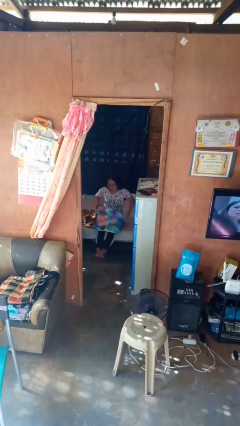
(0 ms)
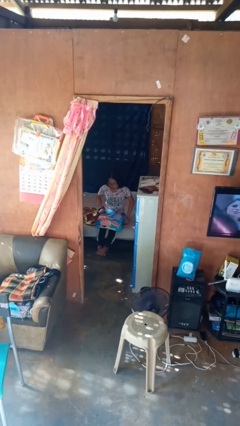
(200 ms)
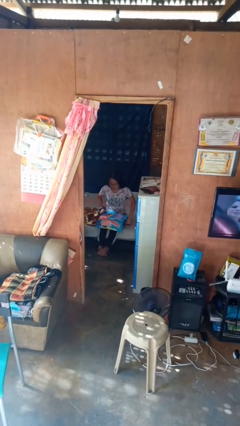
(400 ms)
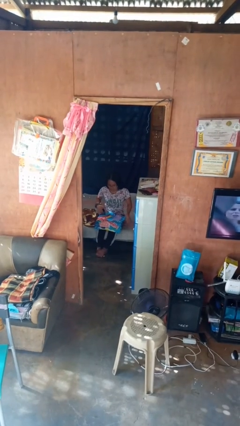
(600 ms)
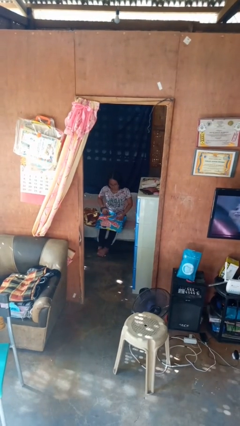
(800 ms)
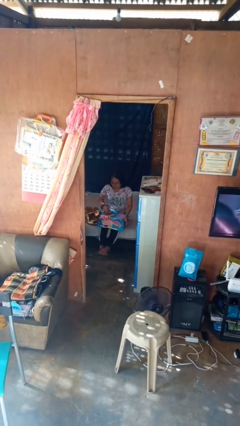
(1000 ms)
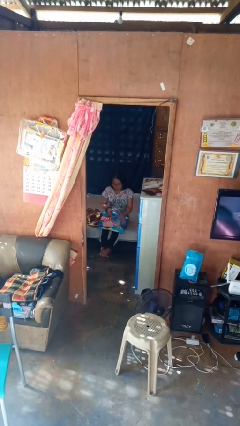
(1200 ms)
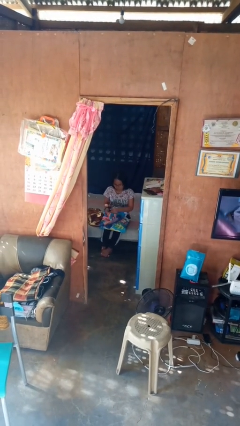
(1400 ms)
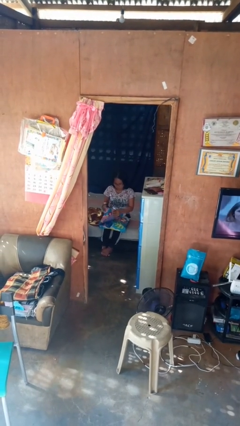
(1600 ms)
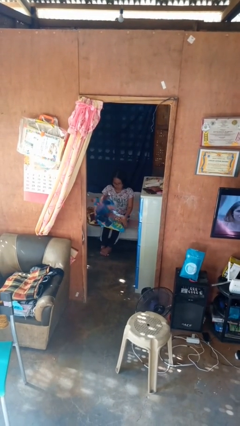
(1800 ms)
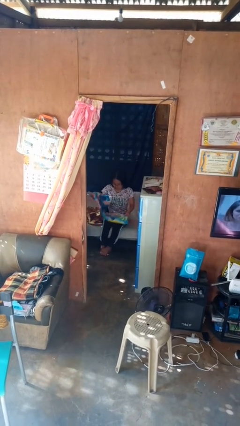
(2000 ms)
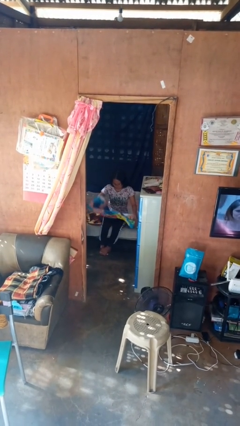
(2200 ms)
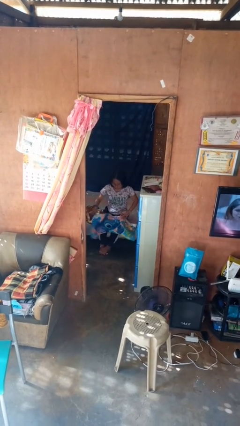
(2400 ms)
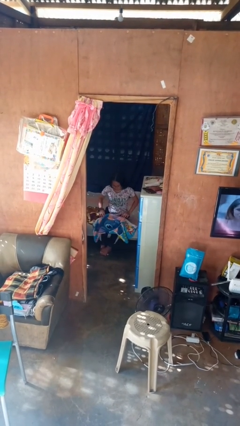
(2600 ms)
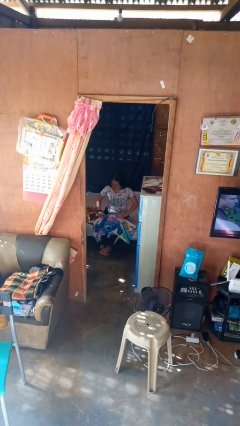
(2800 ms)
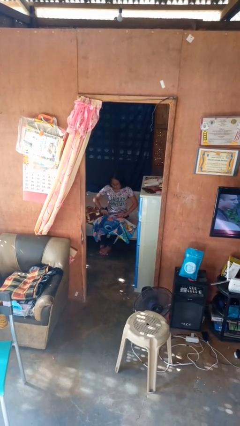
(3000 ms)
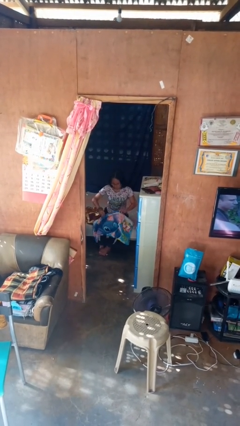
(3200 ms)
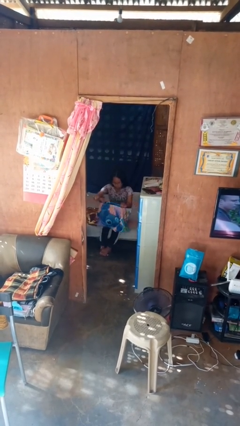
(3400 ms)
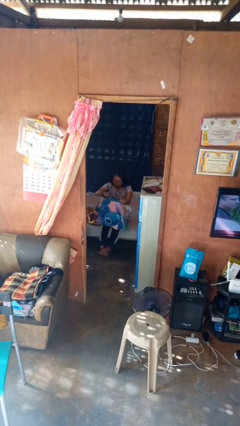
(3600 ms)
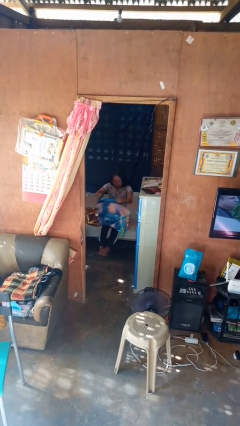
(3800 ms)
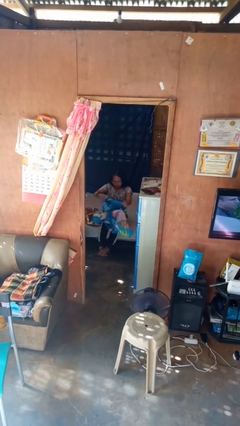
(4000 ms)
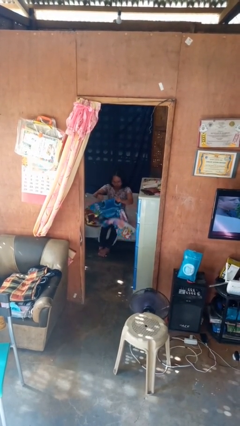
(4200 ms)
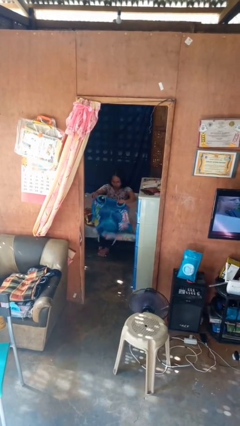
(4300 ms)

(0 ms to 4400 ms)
person unfolds blanket

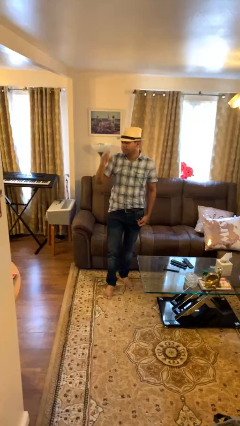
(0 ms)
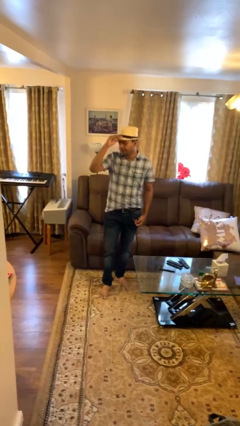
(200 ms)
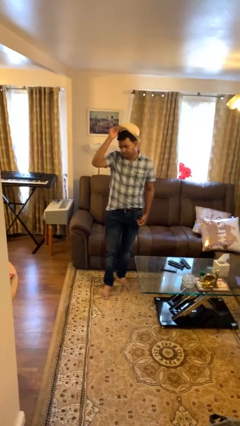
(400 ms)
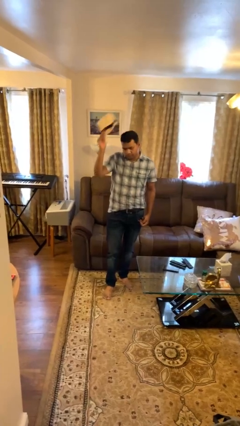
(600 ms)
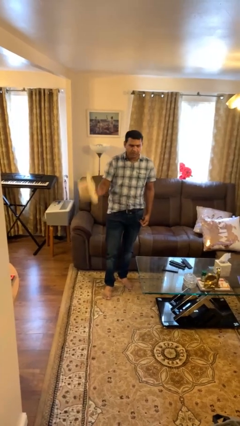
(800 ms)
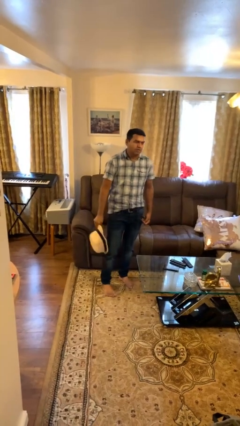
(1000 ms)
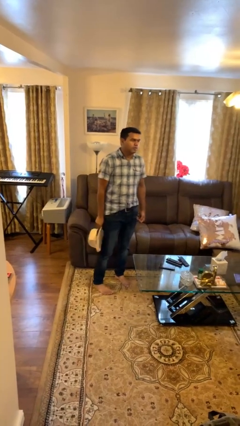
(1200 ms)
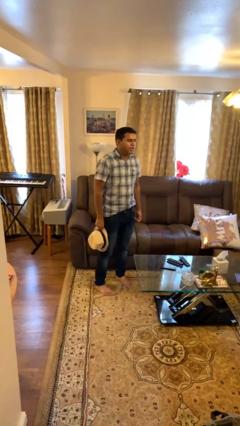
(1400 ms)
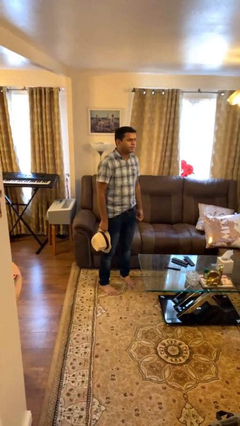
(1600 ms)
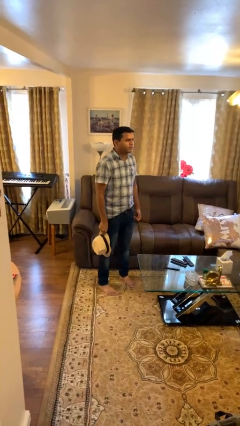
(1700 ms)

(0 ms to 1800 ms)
person takes off hat

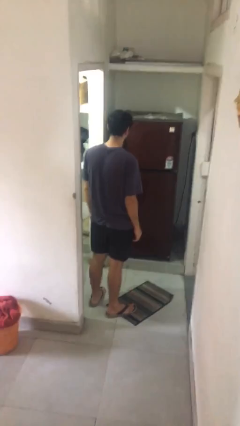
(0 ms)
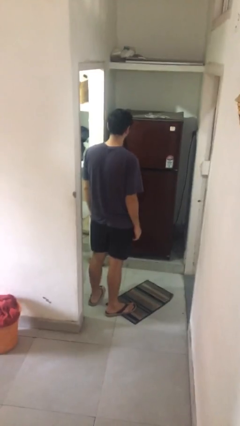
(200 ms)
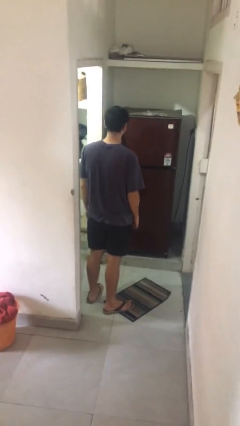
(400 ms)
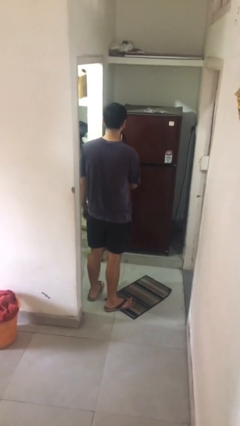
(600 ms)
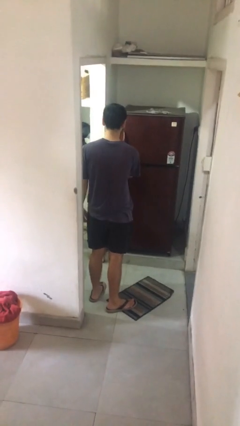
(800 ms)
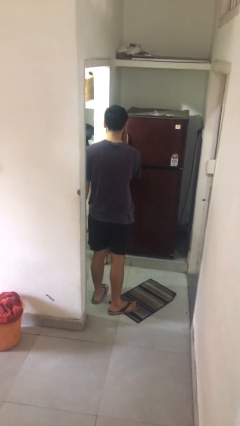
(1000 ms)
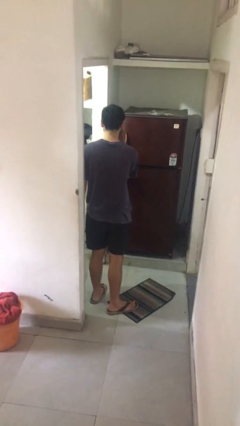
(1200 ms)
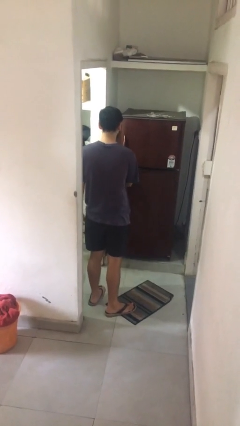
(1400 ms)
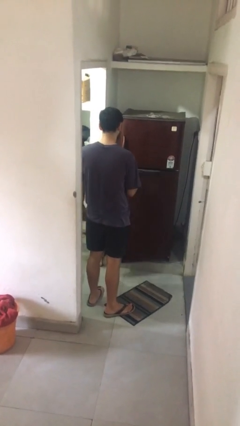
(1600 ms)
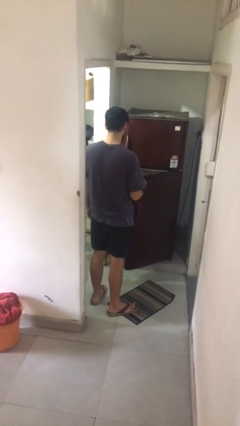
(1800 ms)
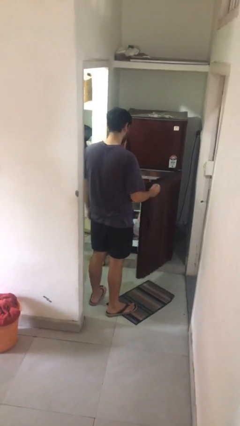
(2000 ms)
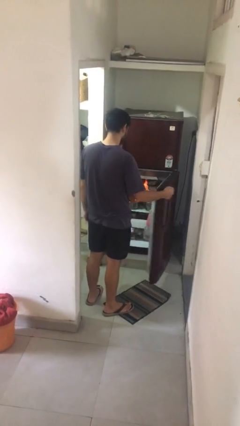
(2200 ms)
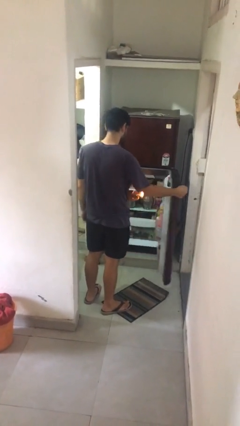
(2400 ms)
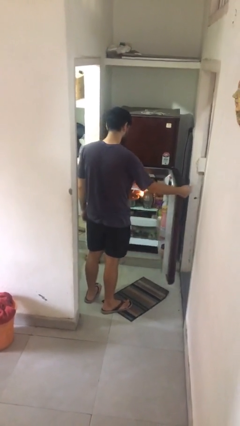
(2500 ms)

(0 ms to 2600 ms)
person opens refrigerator

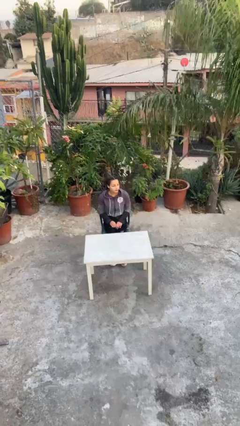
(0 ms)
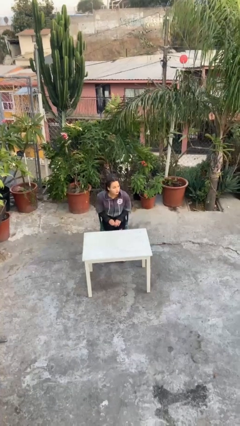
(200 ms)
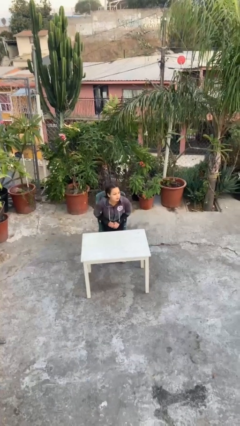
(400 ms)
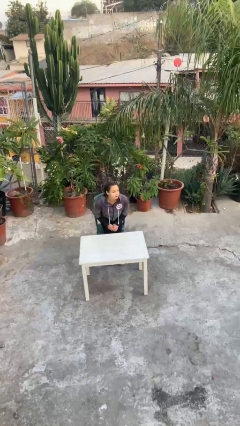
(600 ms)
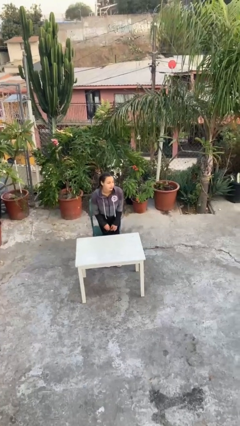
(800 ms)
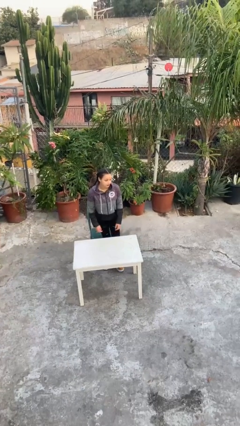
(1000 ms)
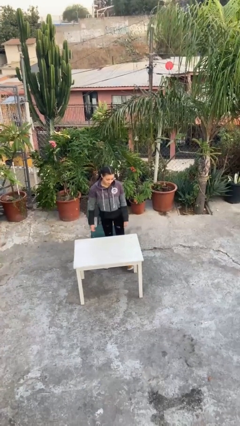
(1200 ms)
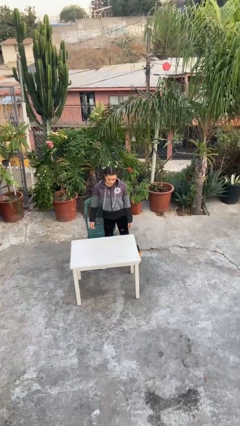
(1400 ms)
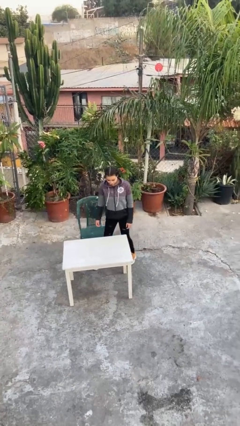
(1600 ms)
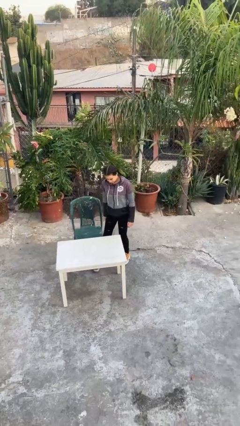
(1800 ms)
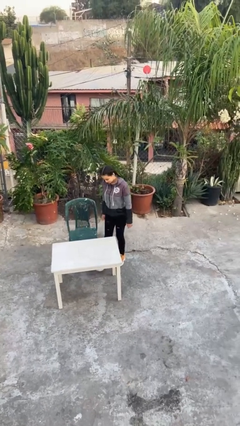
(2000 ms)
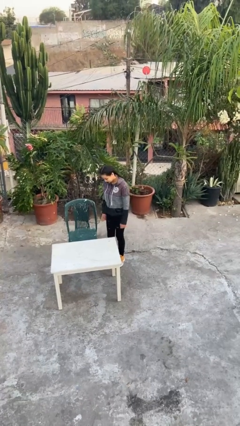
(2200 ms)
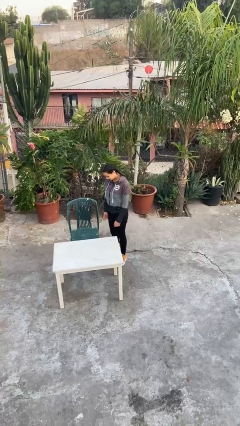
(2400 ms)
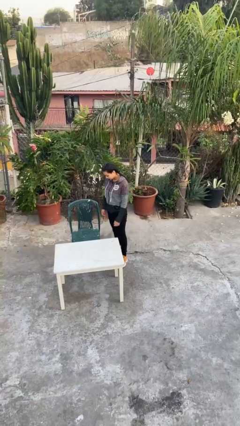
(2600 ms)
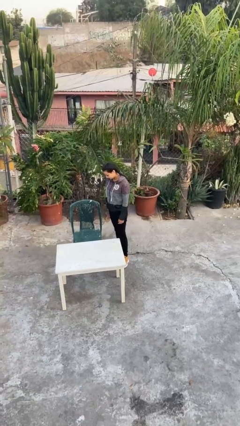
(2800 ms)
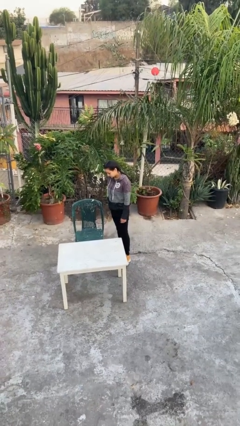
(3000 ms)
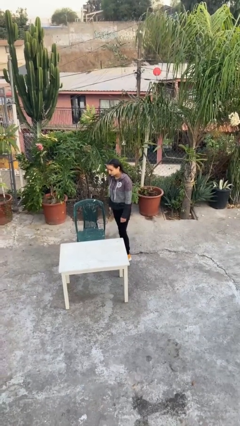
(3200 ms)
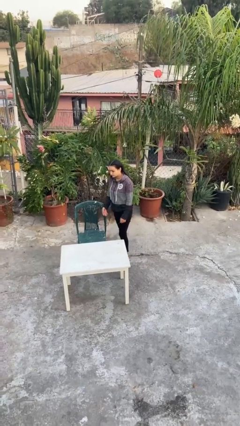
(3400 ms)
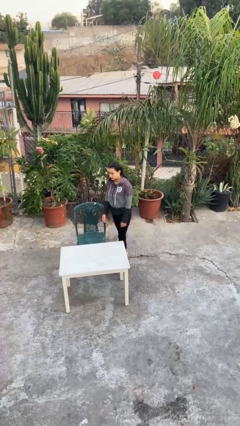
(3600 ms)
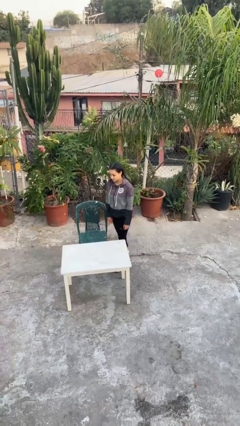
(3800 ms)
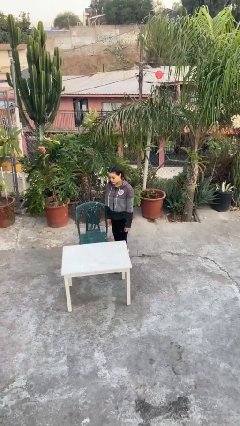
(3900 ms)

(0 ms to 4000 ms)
person stands up

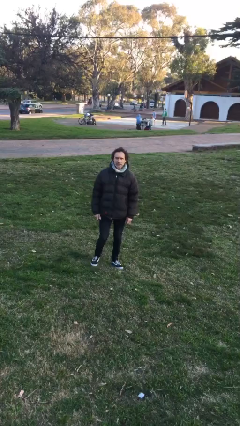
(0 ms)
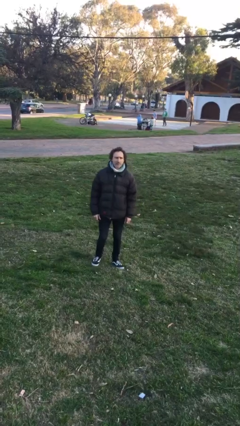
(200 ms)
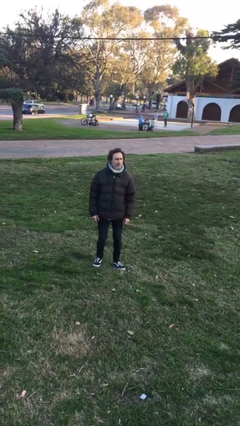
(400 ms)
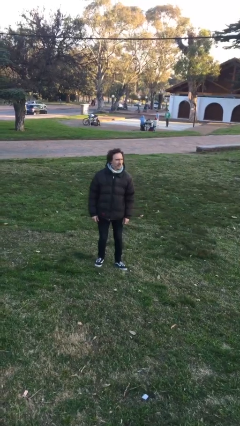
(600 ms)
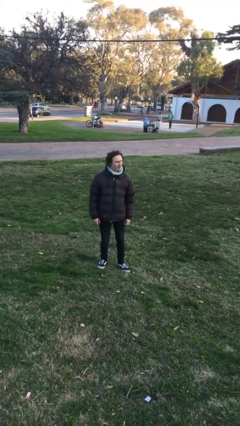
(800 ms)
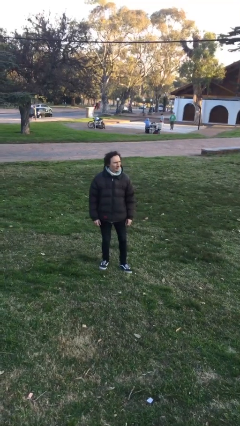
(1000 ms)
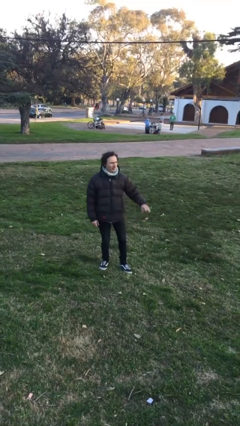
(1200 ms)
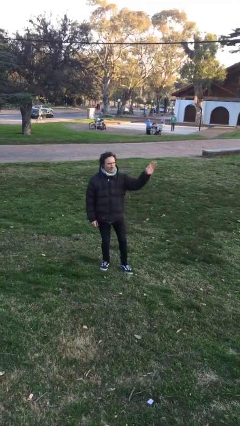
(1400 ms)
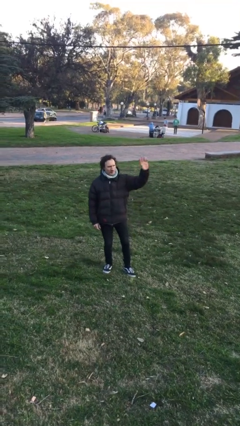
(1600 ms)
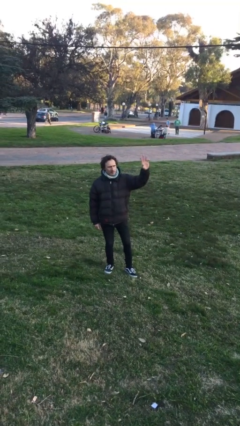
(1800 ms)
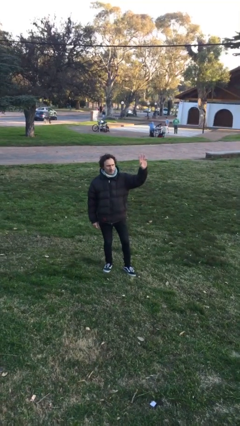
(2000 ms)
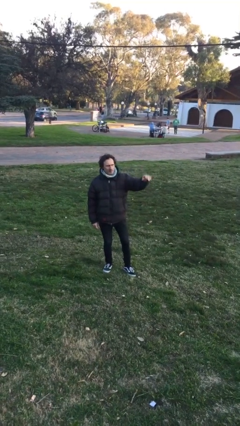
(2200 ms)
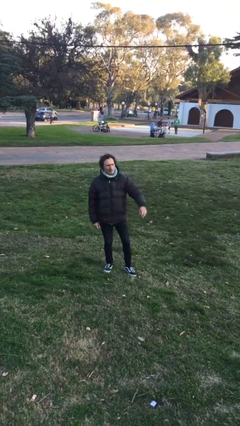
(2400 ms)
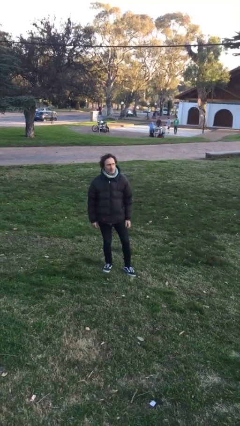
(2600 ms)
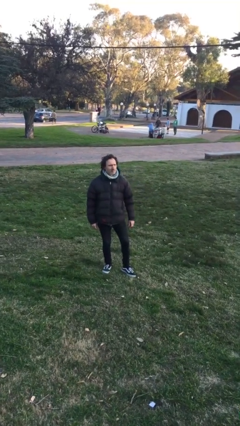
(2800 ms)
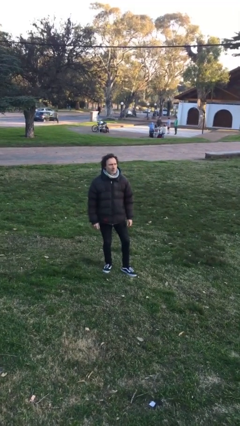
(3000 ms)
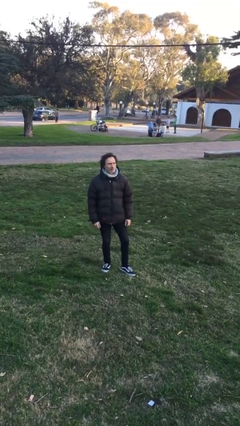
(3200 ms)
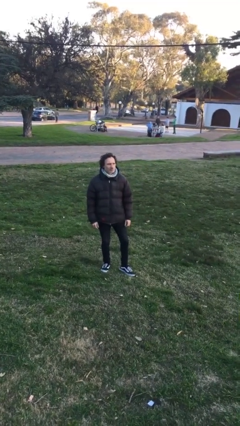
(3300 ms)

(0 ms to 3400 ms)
person waves at person

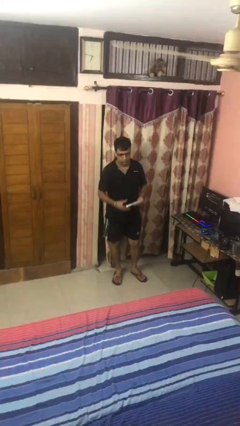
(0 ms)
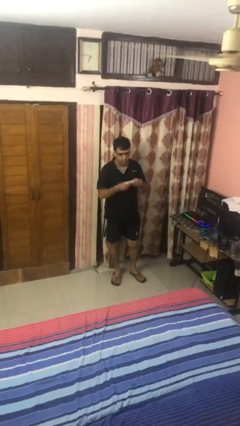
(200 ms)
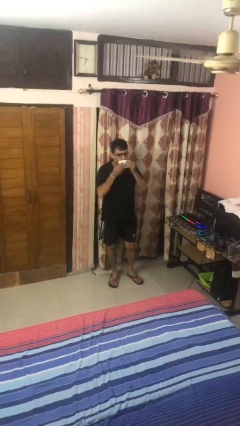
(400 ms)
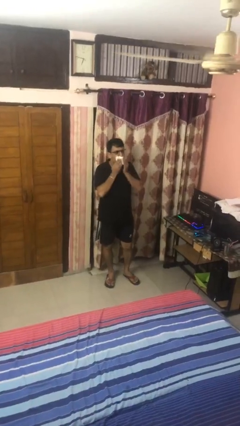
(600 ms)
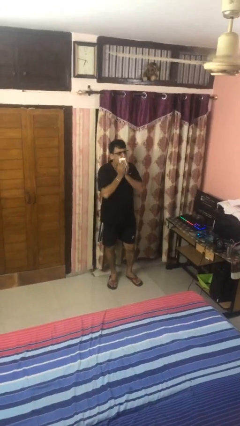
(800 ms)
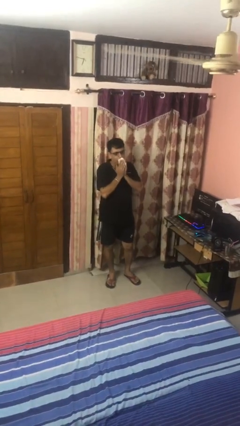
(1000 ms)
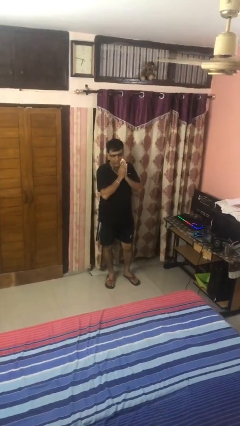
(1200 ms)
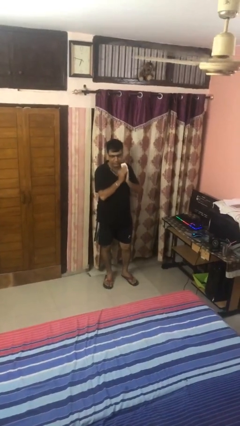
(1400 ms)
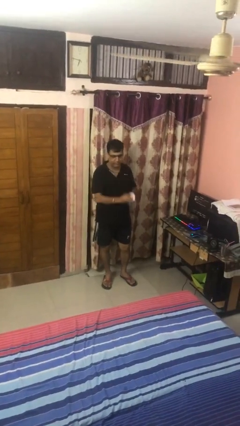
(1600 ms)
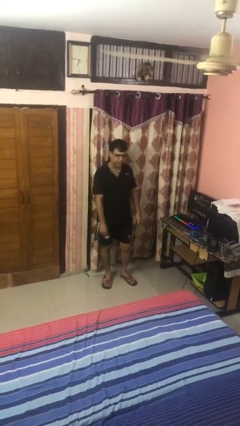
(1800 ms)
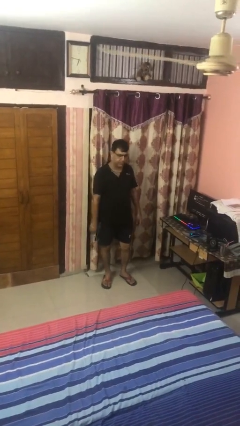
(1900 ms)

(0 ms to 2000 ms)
person wipes mouth with napkin
